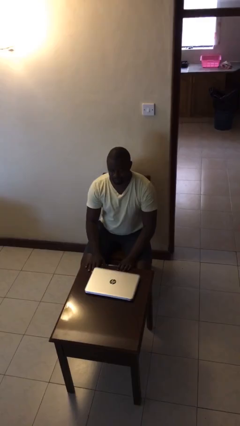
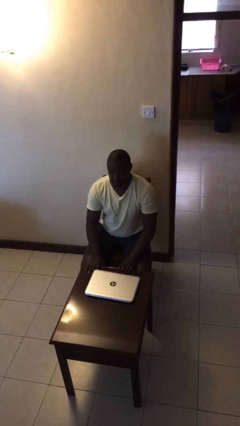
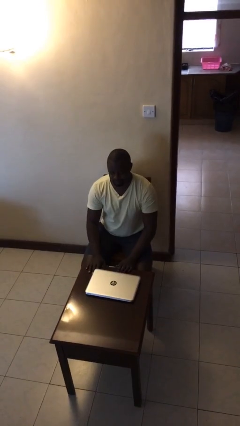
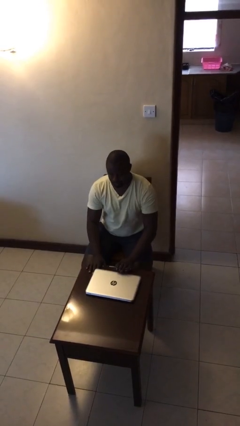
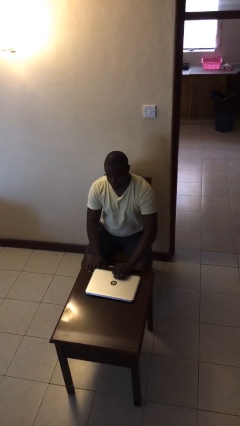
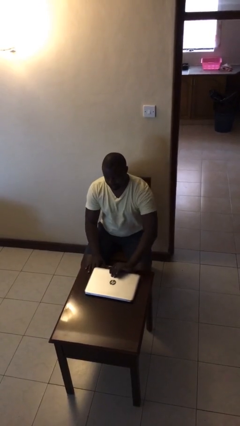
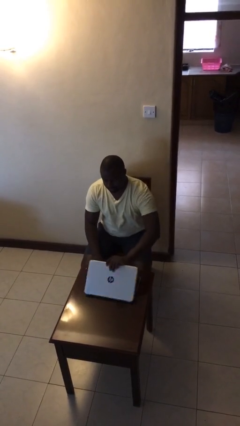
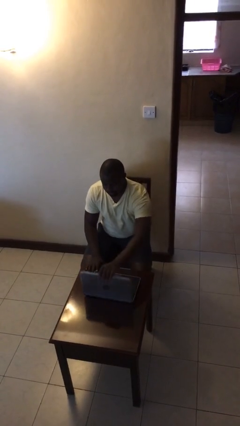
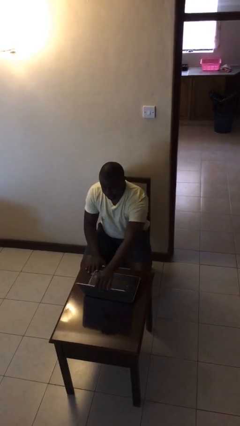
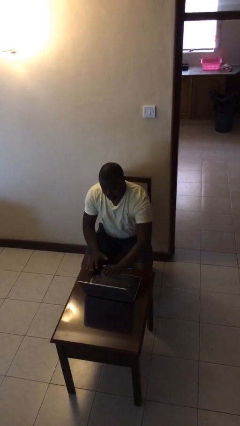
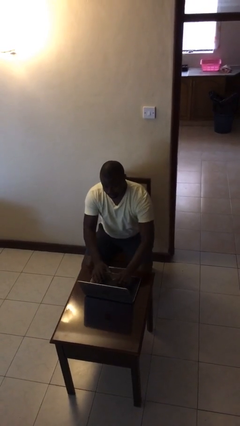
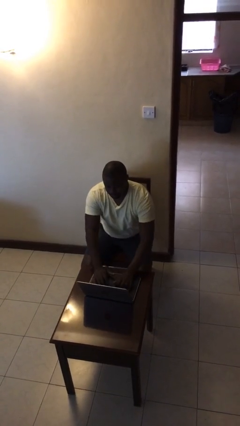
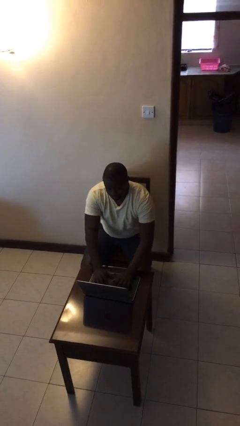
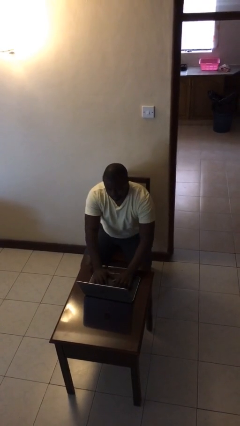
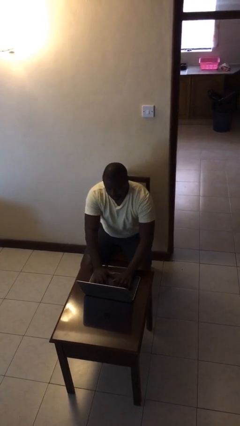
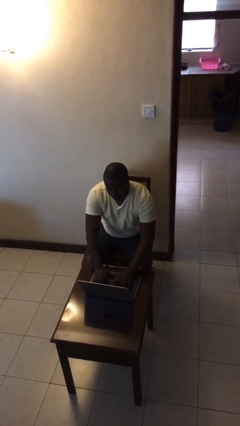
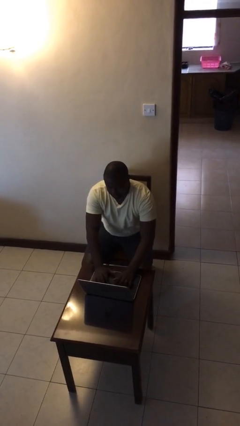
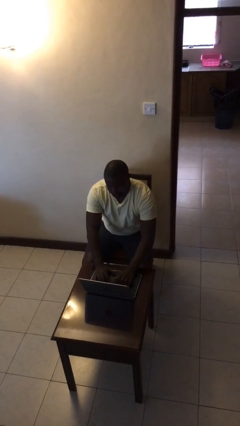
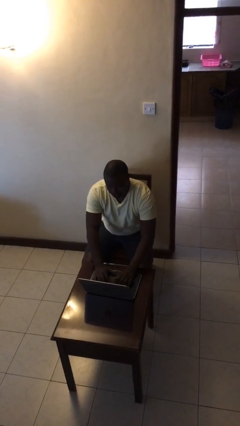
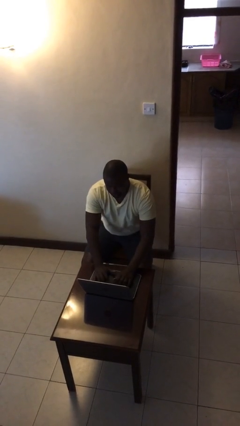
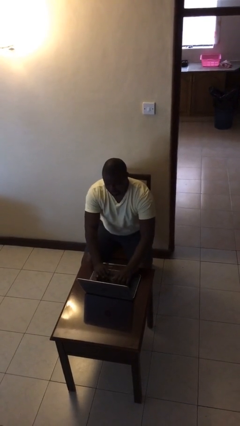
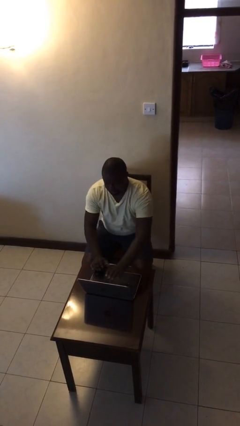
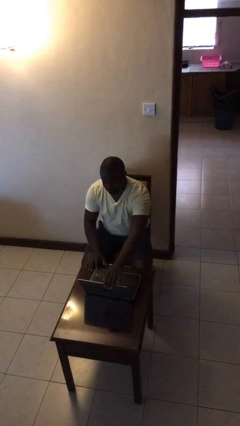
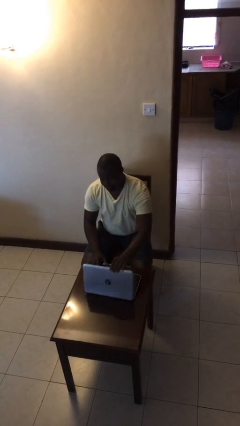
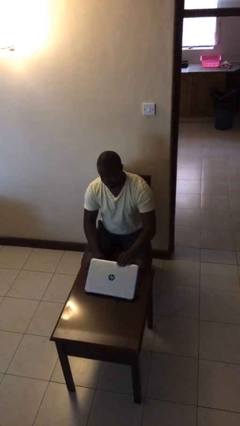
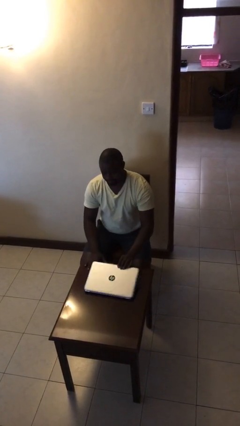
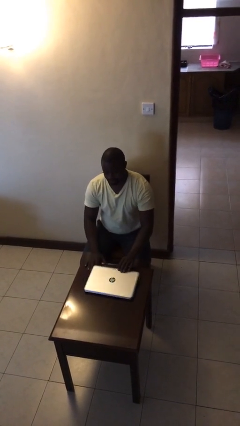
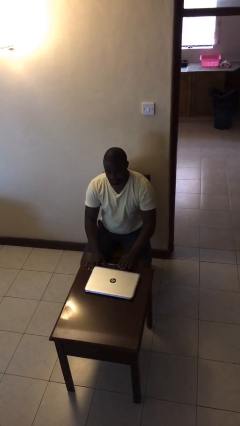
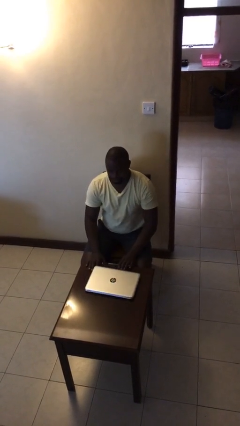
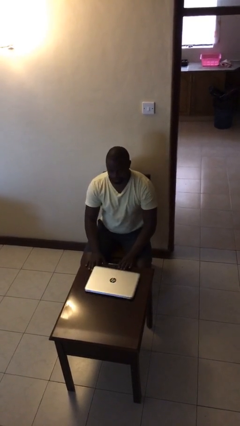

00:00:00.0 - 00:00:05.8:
person interacts with laptop

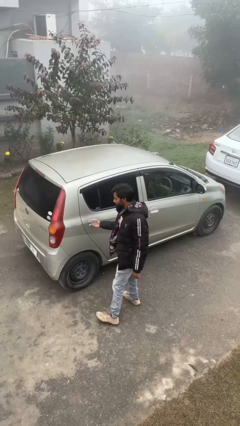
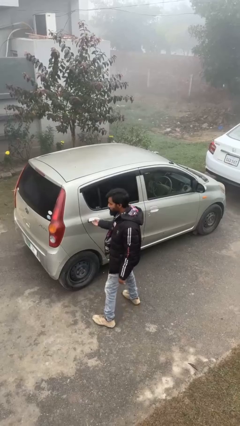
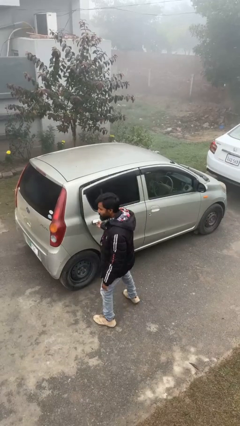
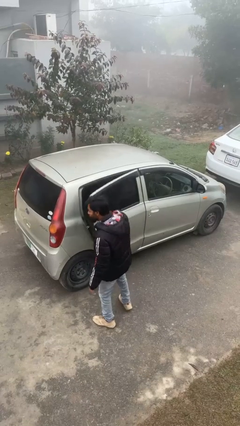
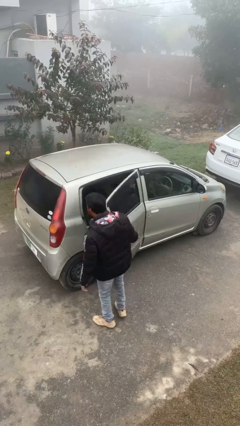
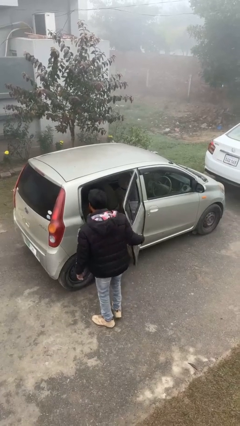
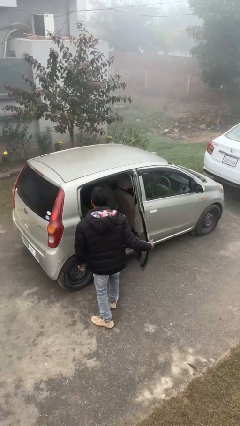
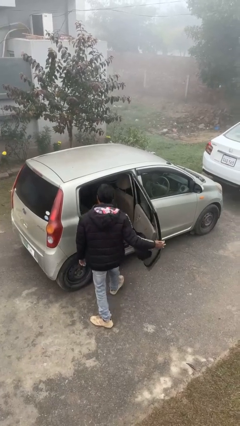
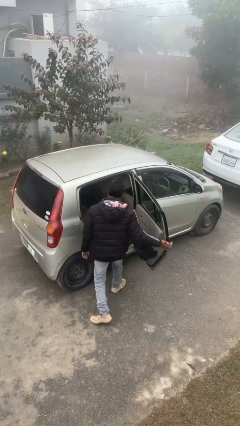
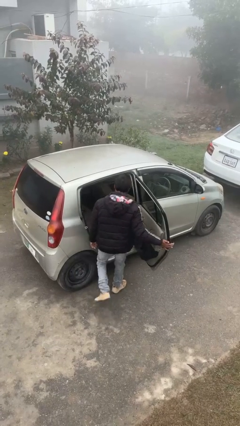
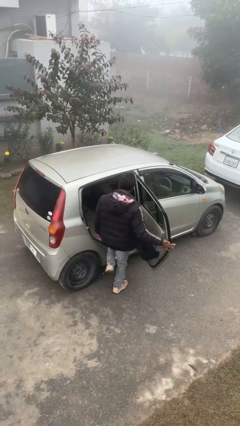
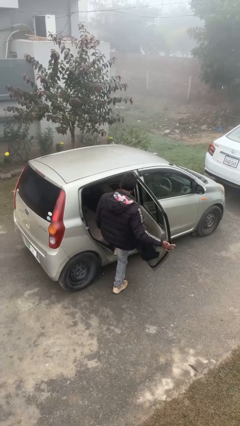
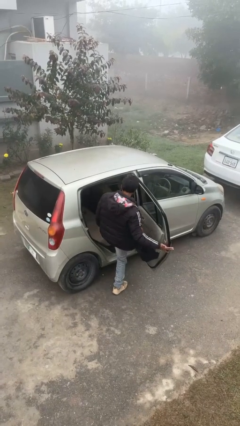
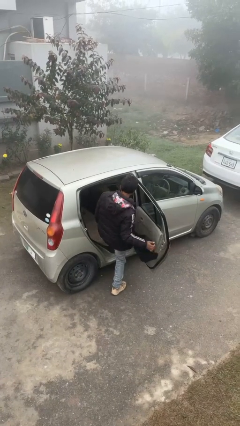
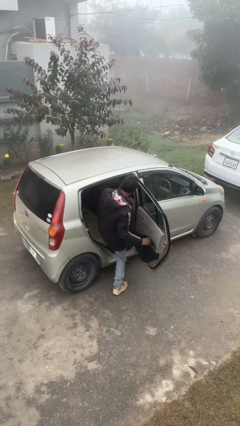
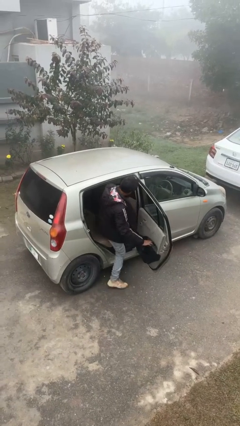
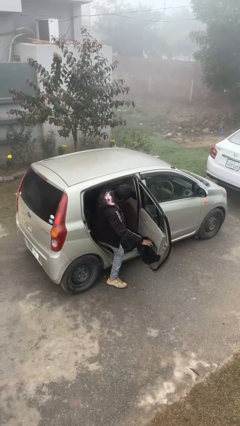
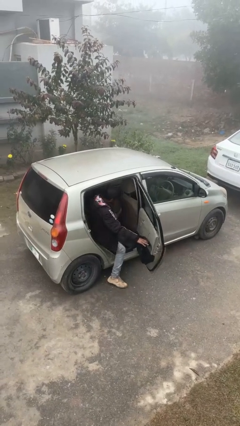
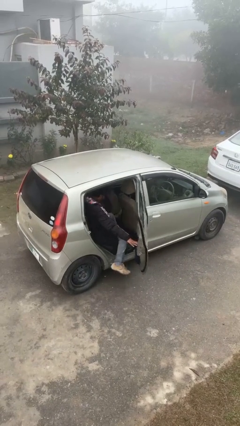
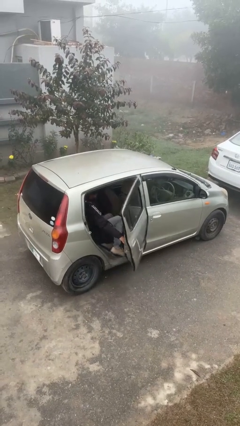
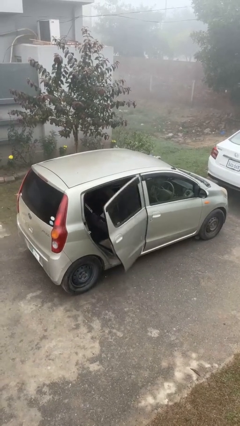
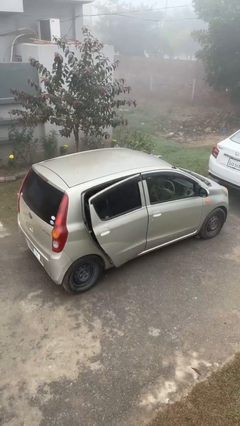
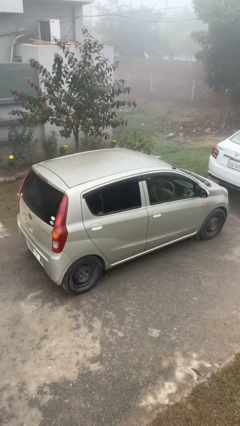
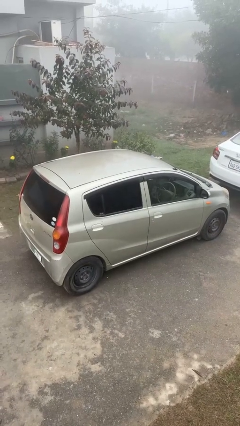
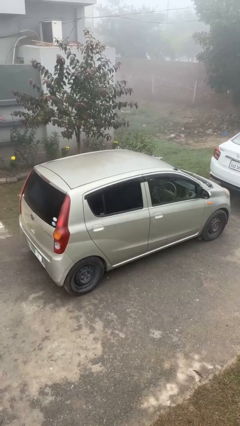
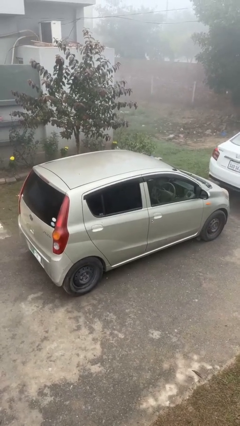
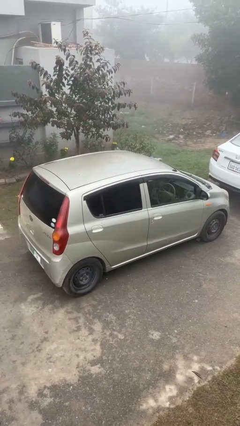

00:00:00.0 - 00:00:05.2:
car picks up person

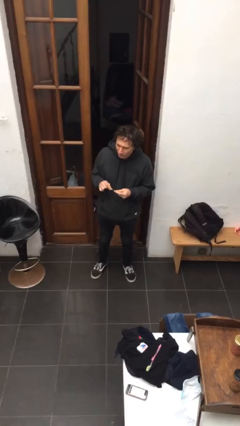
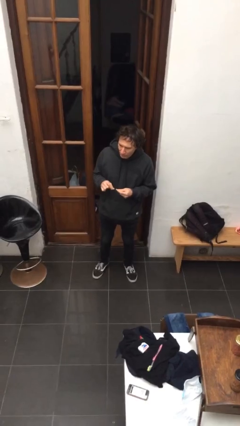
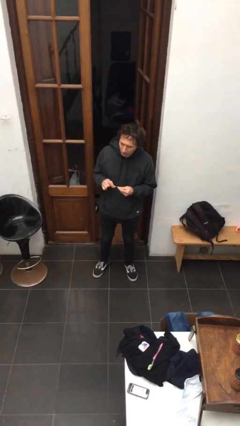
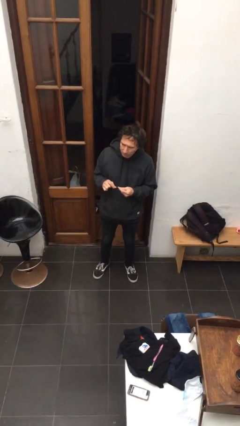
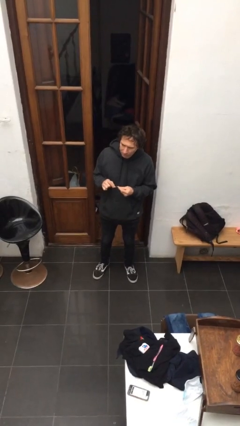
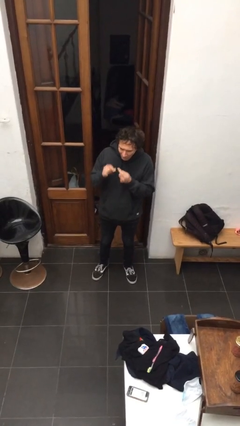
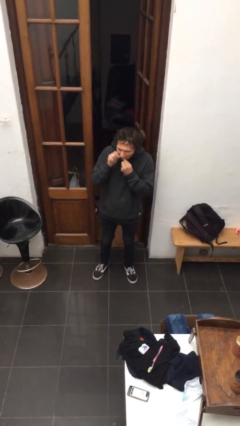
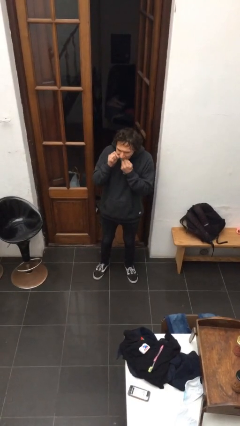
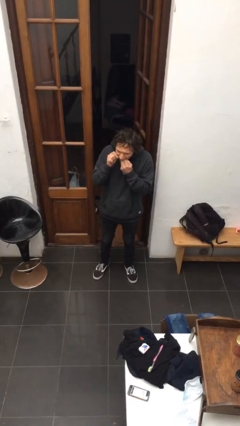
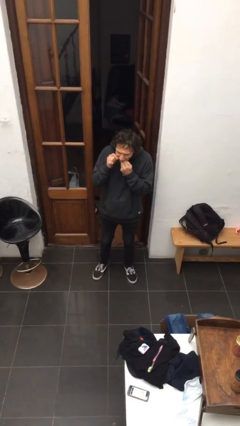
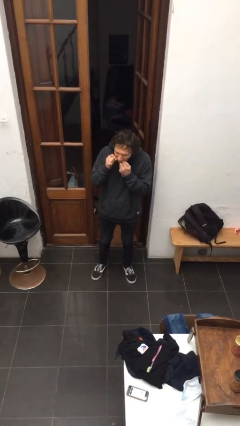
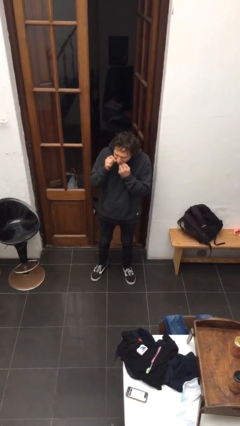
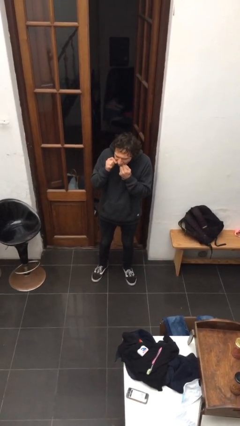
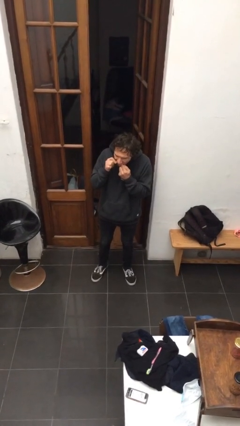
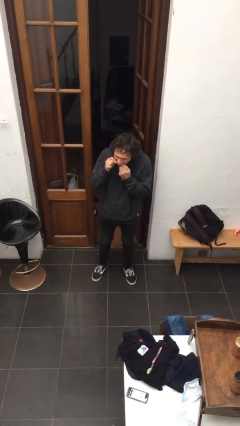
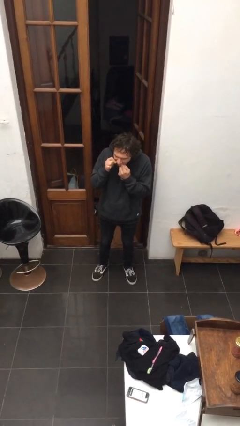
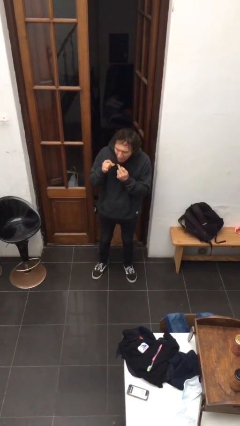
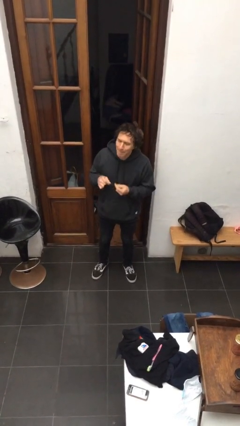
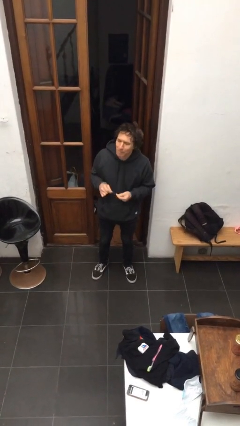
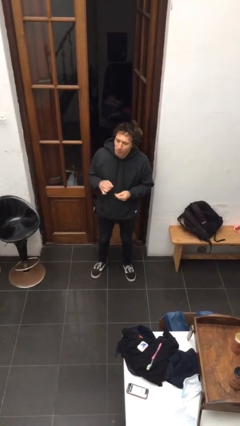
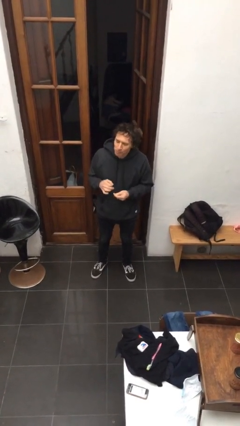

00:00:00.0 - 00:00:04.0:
person flosses

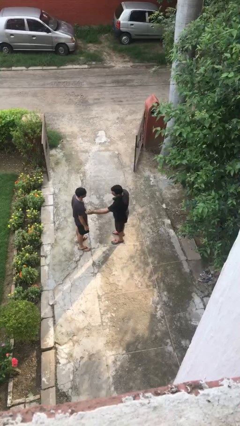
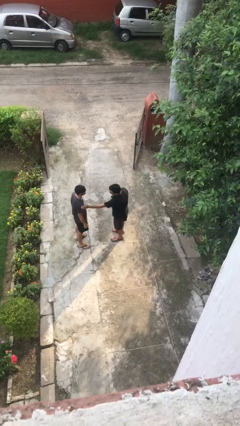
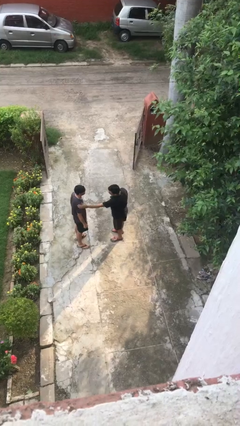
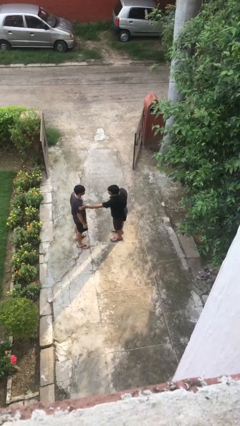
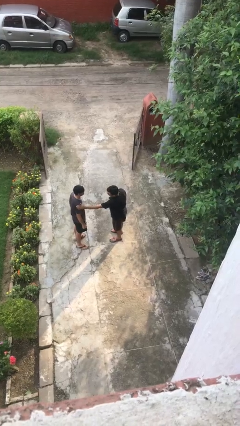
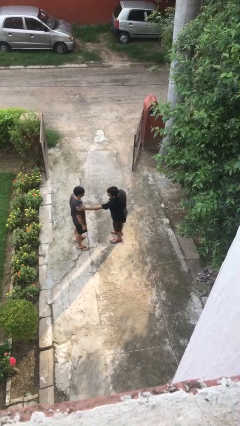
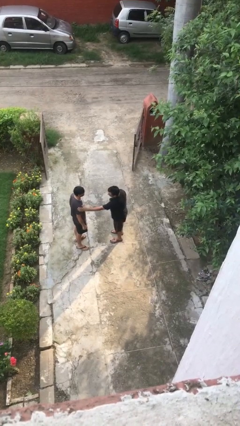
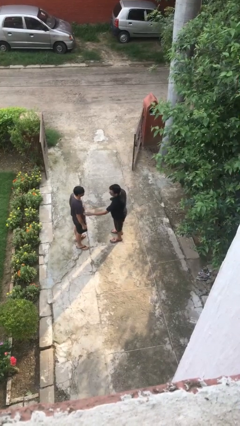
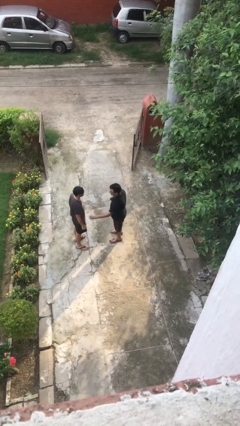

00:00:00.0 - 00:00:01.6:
person pounds shoulders of person

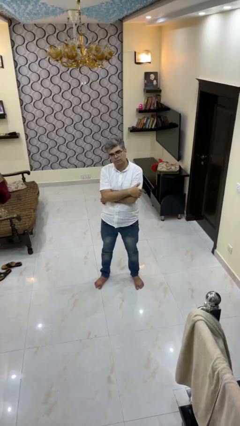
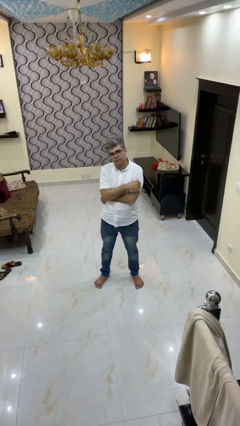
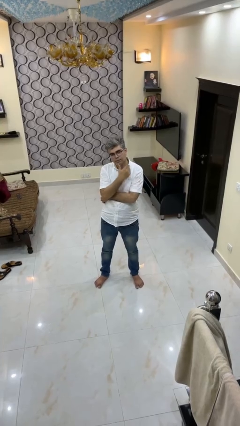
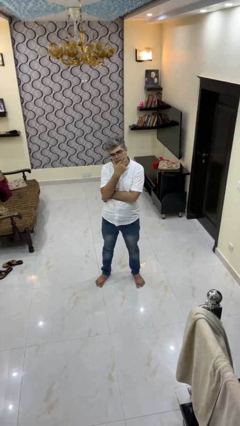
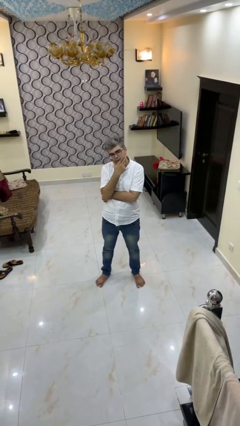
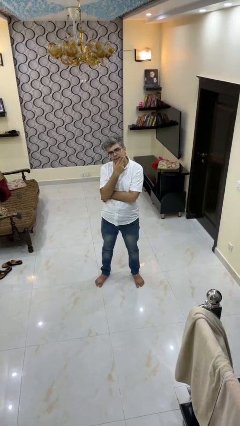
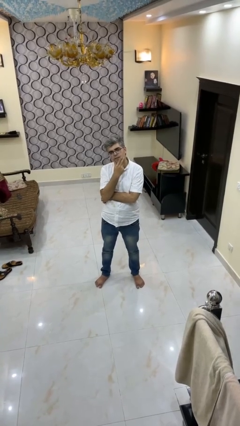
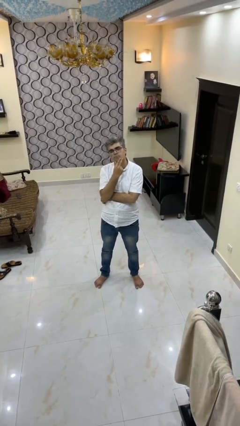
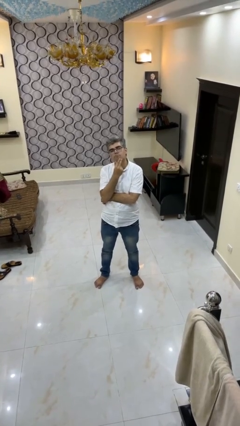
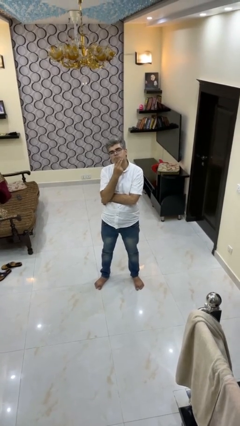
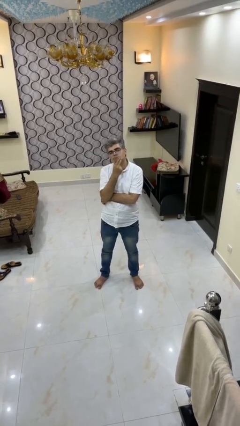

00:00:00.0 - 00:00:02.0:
person strokes chin
